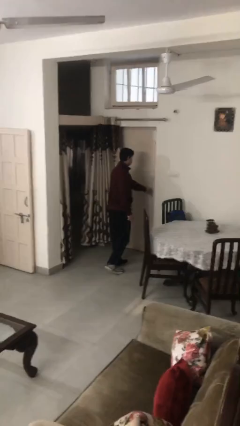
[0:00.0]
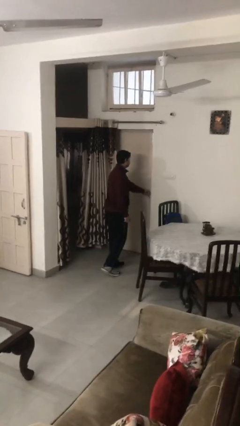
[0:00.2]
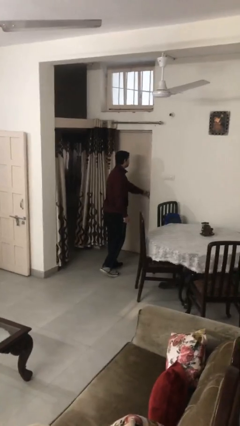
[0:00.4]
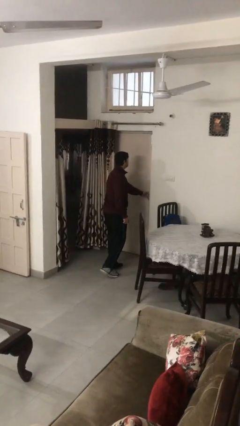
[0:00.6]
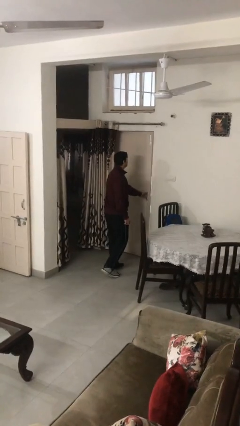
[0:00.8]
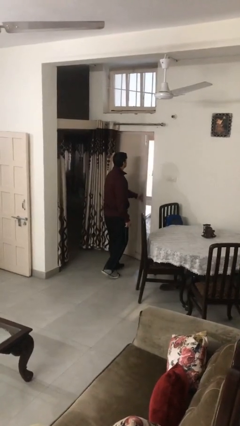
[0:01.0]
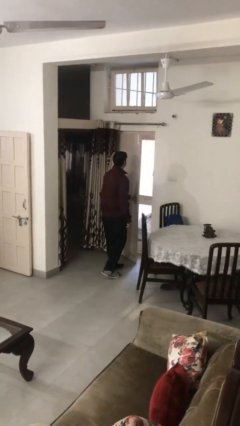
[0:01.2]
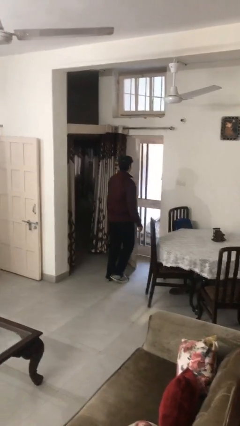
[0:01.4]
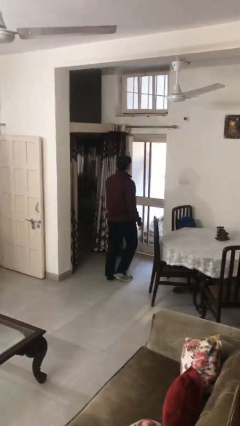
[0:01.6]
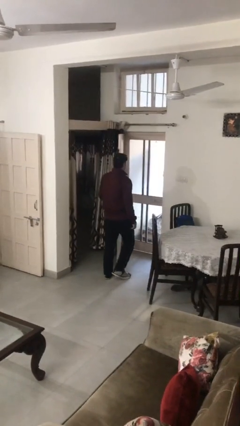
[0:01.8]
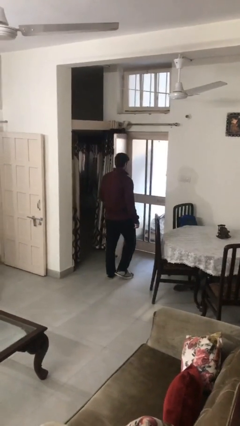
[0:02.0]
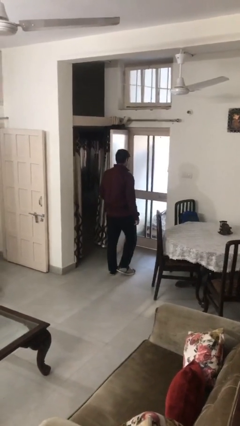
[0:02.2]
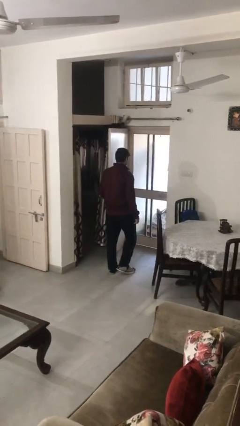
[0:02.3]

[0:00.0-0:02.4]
person opens facility door

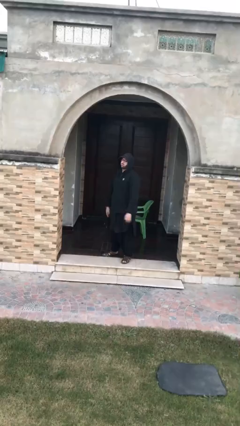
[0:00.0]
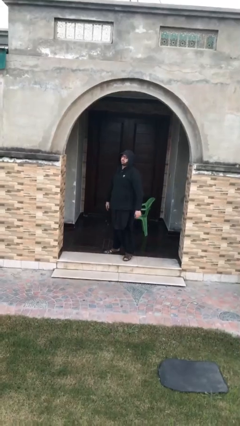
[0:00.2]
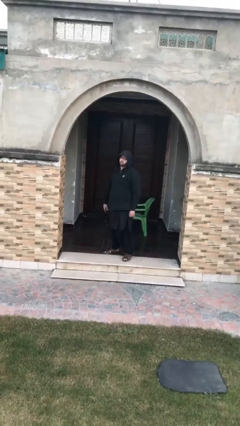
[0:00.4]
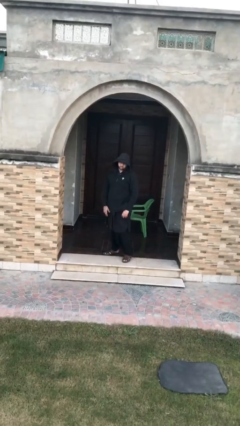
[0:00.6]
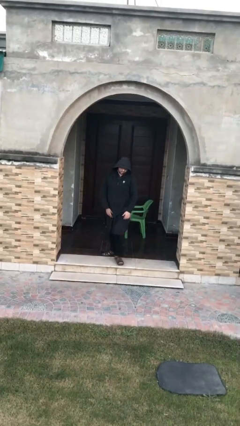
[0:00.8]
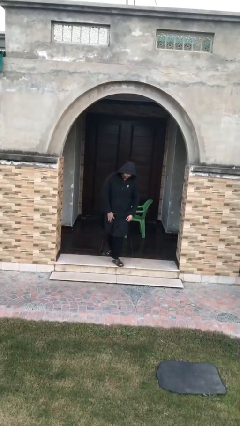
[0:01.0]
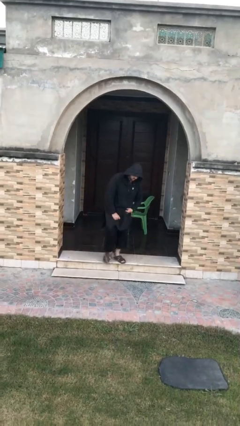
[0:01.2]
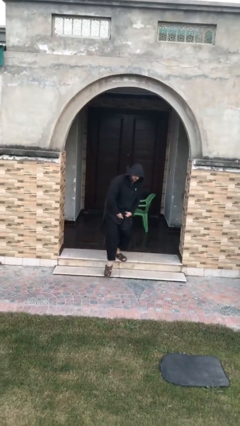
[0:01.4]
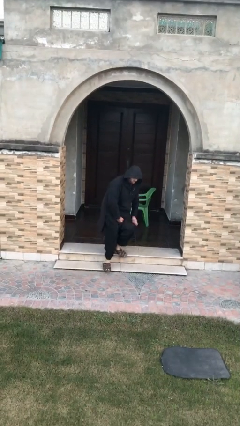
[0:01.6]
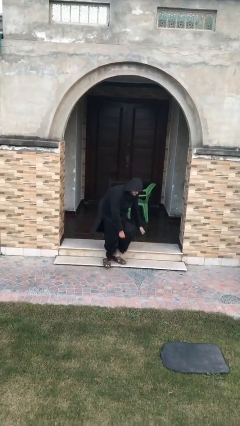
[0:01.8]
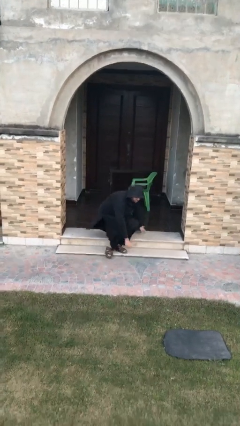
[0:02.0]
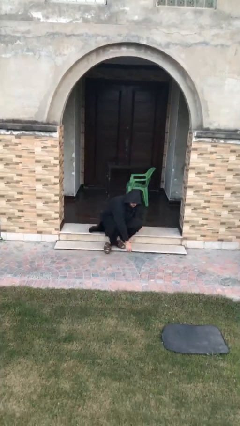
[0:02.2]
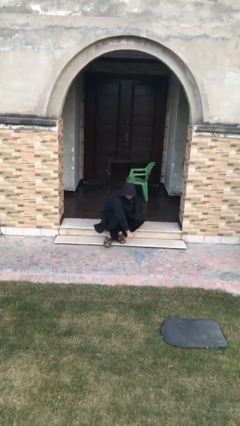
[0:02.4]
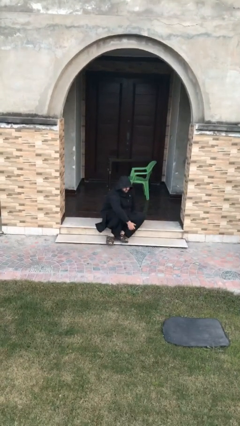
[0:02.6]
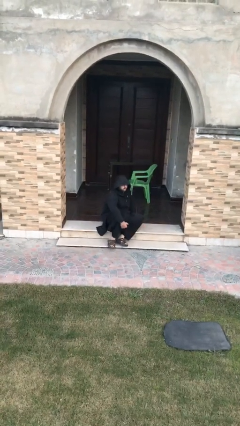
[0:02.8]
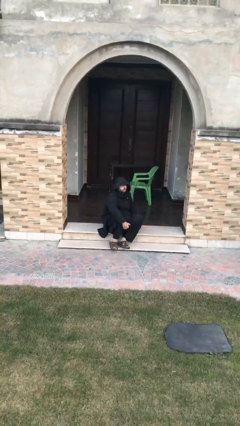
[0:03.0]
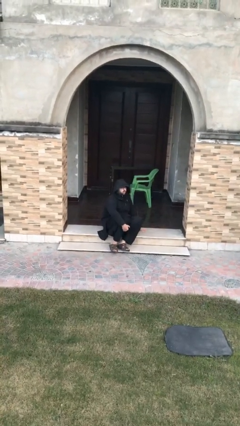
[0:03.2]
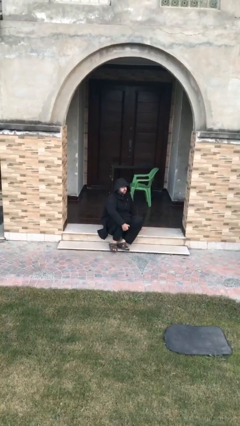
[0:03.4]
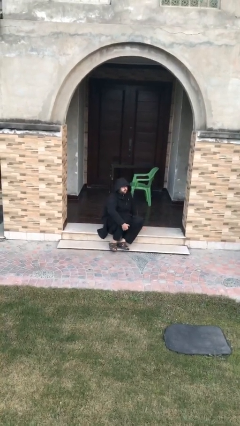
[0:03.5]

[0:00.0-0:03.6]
person sits down

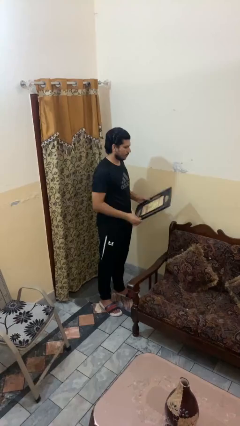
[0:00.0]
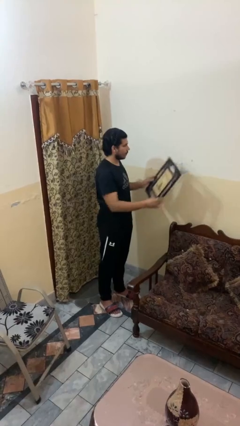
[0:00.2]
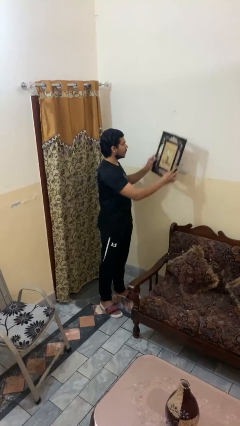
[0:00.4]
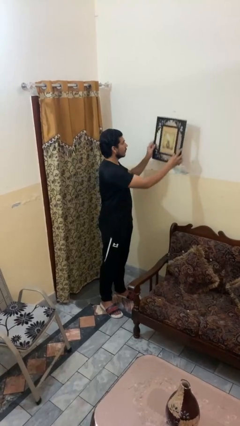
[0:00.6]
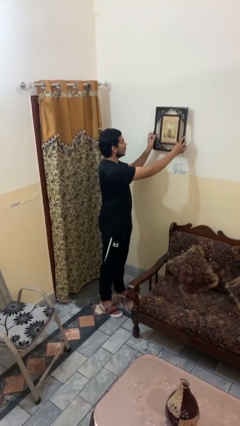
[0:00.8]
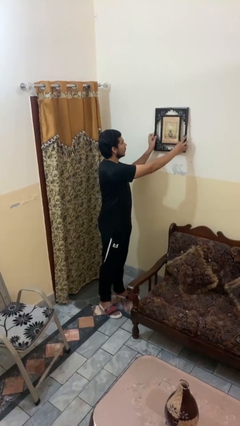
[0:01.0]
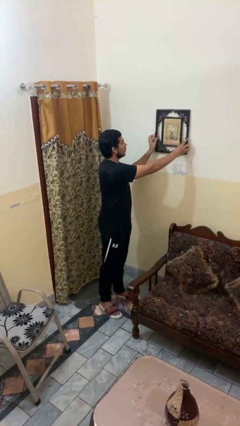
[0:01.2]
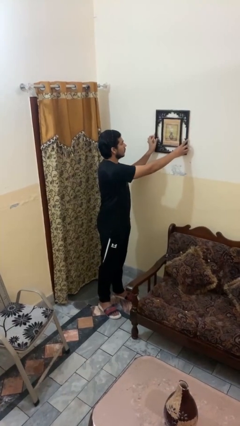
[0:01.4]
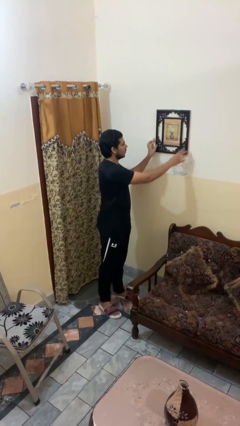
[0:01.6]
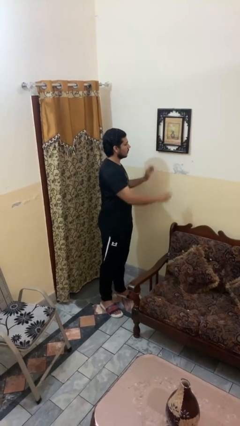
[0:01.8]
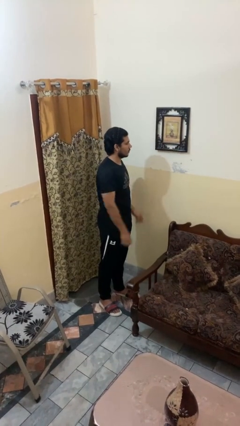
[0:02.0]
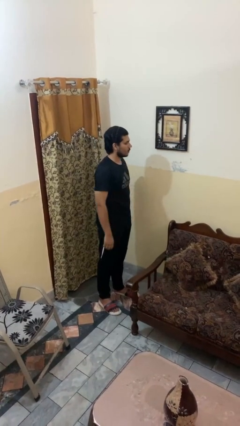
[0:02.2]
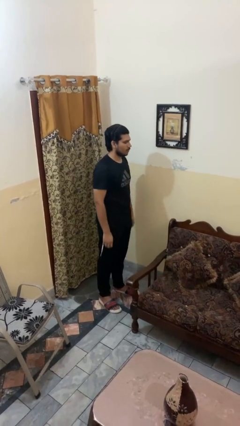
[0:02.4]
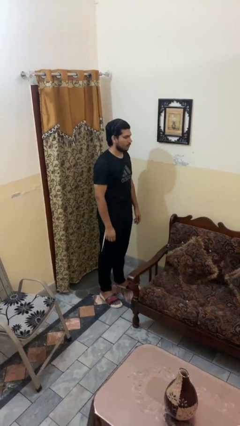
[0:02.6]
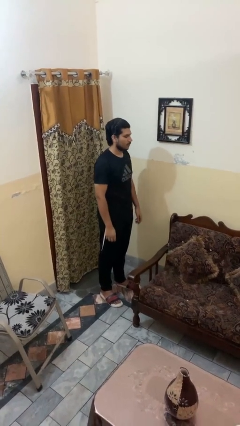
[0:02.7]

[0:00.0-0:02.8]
person puts up picture frame

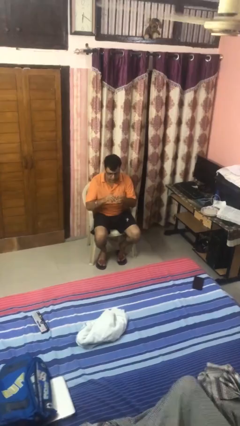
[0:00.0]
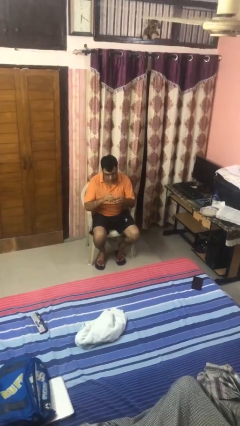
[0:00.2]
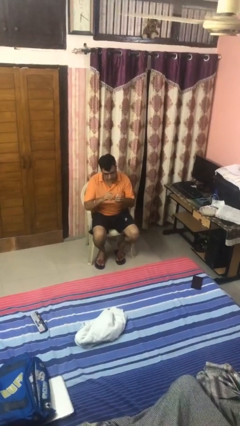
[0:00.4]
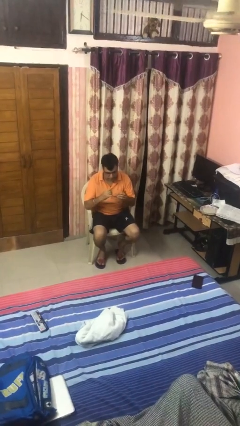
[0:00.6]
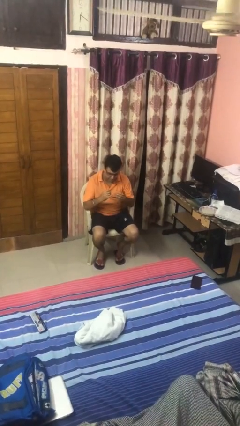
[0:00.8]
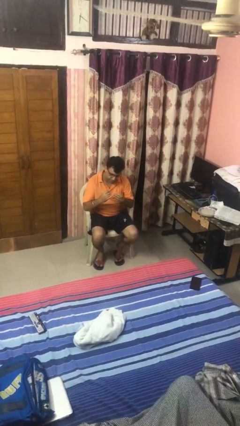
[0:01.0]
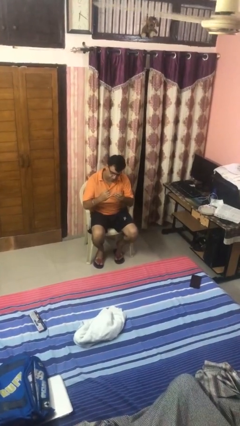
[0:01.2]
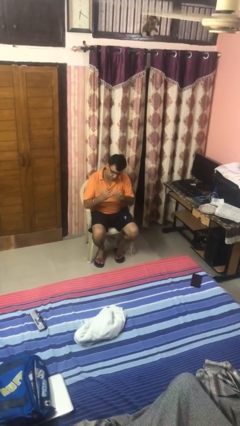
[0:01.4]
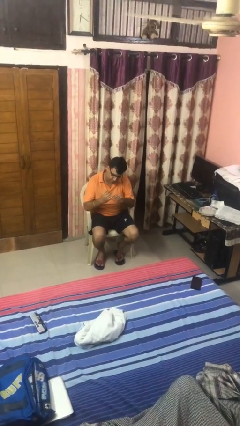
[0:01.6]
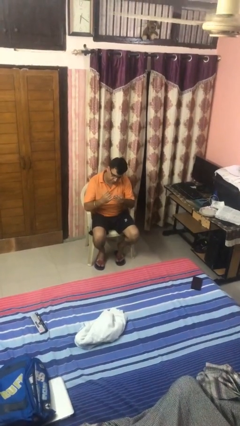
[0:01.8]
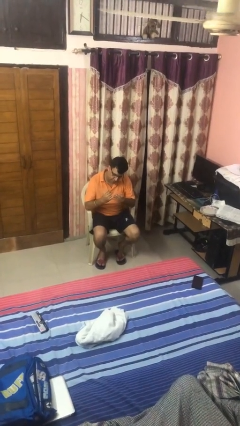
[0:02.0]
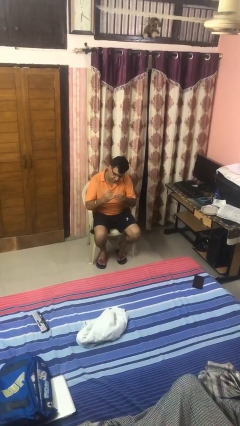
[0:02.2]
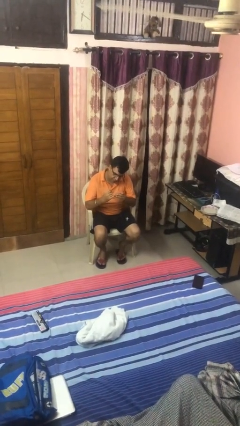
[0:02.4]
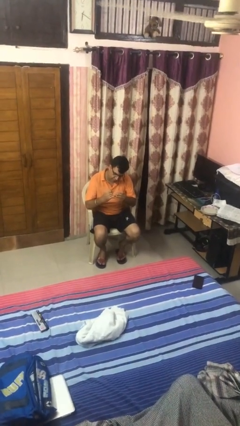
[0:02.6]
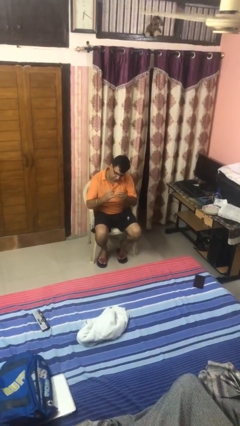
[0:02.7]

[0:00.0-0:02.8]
person clips fingernails

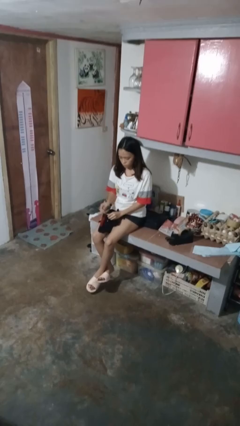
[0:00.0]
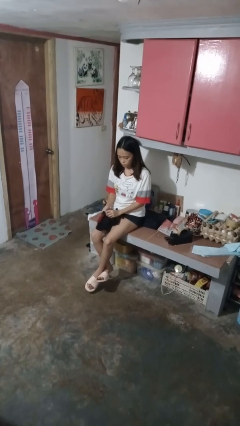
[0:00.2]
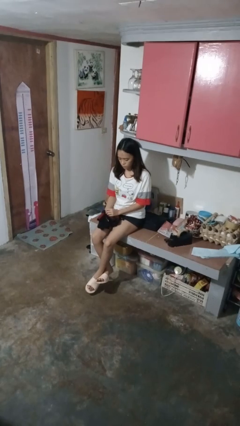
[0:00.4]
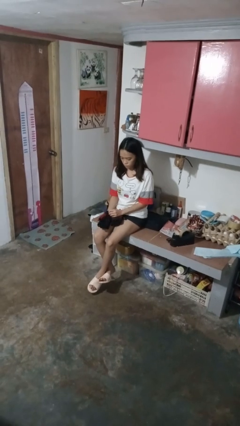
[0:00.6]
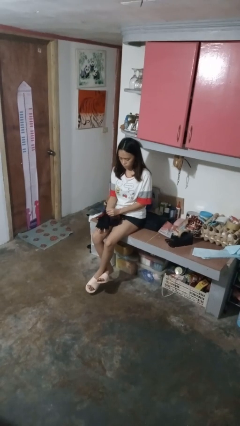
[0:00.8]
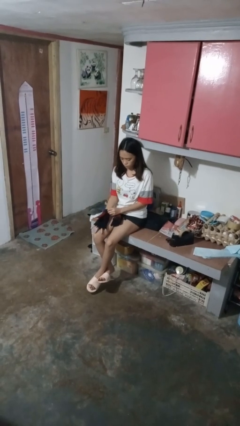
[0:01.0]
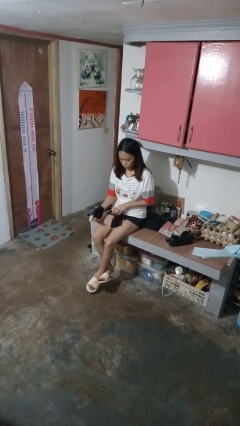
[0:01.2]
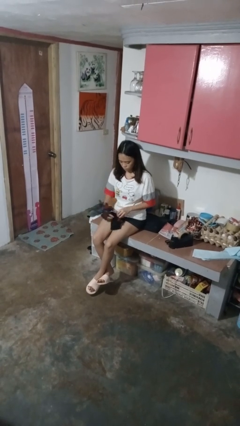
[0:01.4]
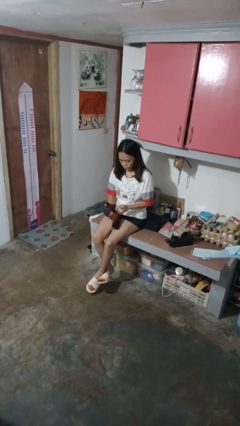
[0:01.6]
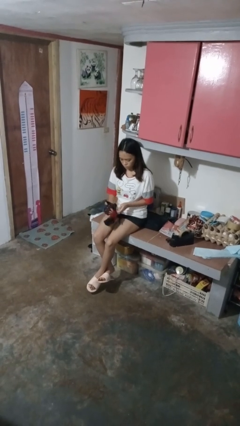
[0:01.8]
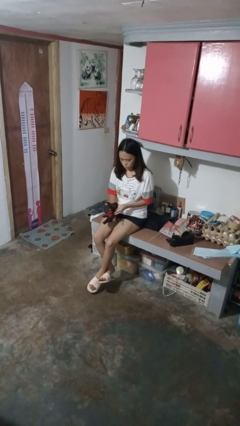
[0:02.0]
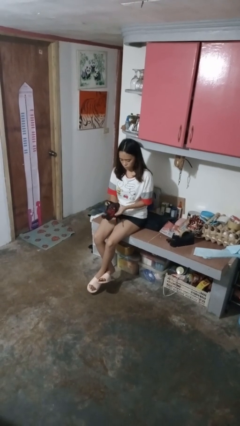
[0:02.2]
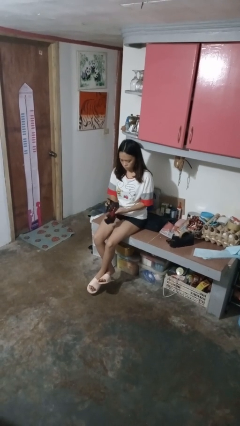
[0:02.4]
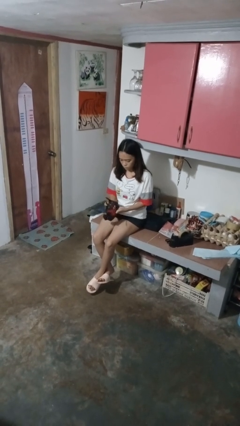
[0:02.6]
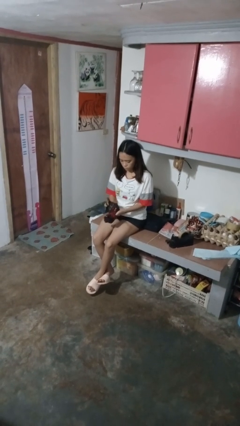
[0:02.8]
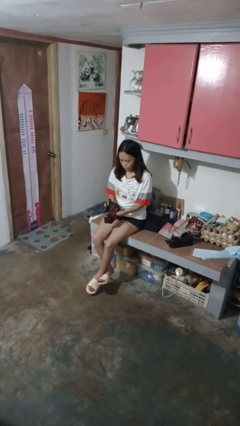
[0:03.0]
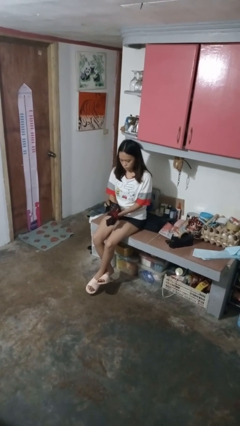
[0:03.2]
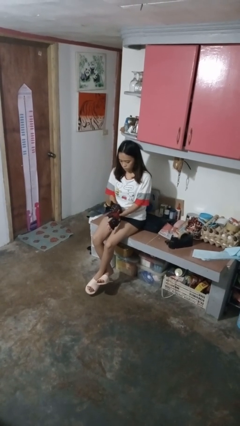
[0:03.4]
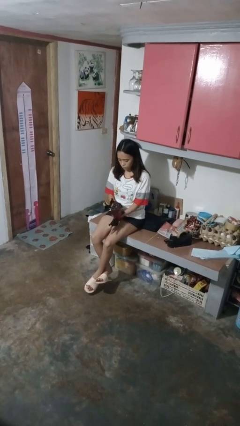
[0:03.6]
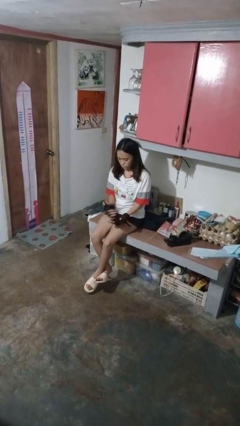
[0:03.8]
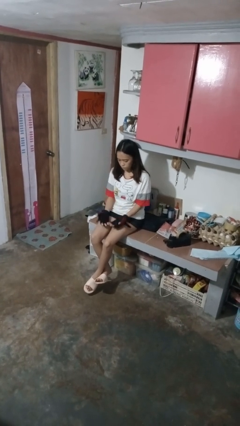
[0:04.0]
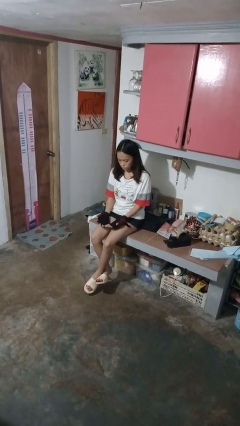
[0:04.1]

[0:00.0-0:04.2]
person puts on gloves

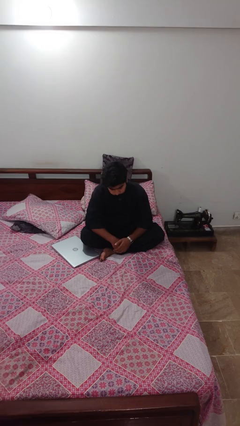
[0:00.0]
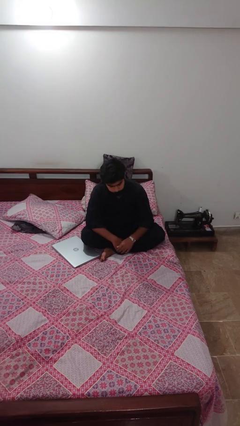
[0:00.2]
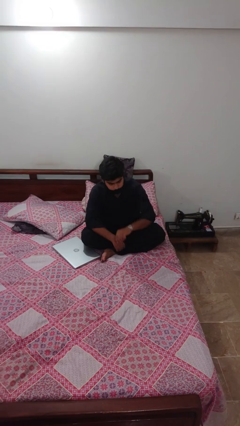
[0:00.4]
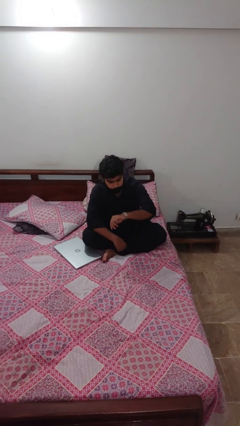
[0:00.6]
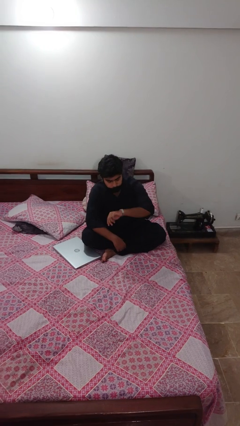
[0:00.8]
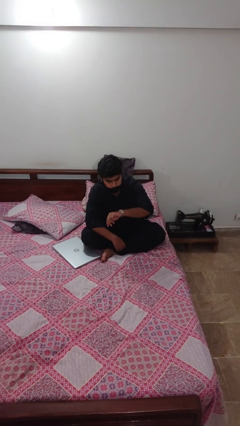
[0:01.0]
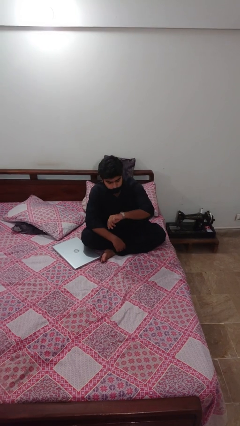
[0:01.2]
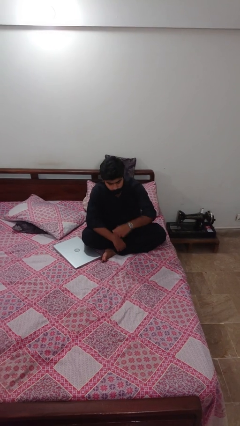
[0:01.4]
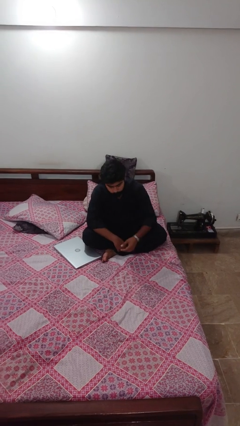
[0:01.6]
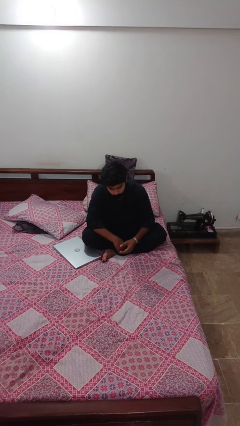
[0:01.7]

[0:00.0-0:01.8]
person looks at wristwatch
